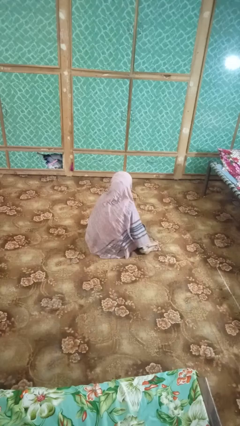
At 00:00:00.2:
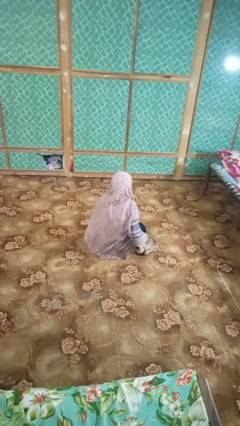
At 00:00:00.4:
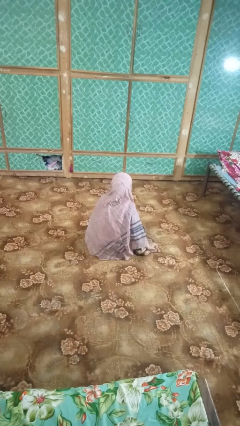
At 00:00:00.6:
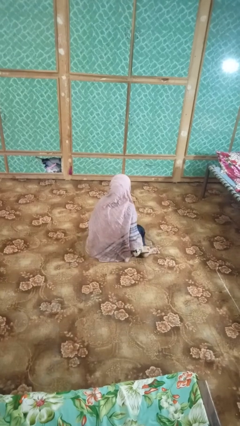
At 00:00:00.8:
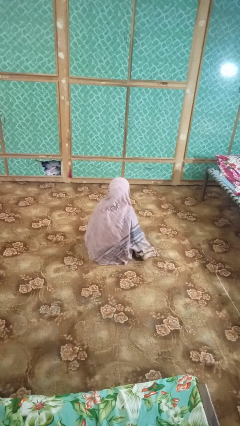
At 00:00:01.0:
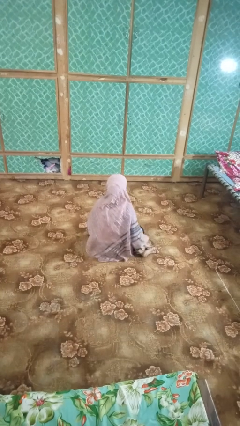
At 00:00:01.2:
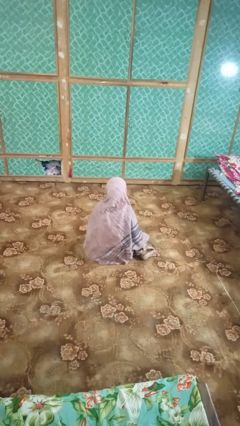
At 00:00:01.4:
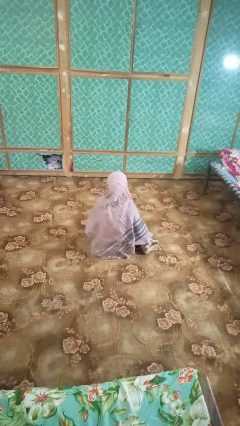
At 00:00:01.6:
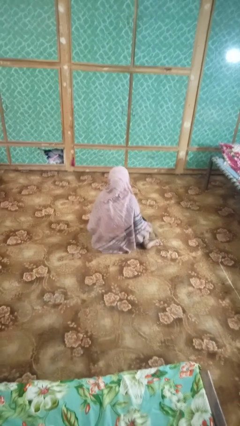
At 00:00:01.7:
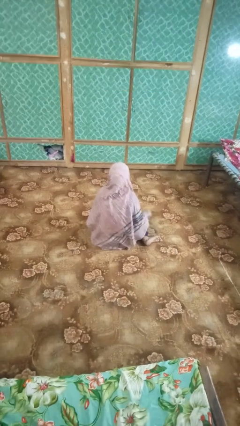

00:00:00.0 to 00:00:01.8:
person rubs foot

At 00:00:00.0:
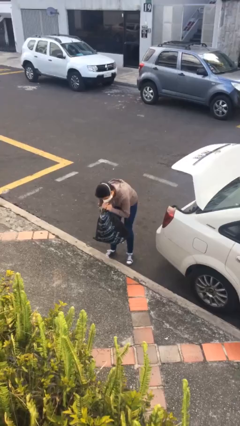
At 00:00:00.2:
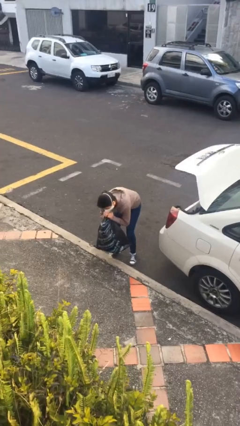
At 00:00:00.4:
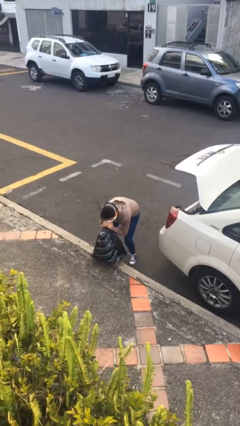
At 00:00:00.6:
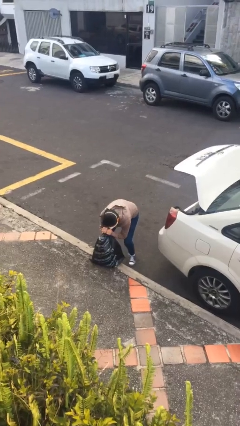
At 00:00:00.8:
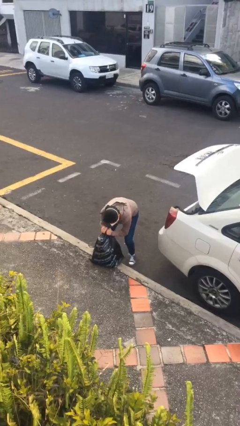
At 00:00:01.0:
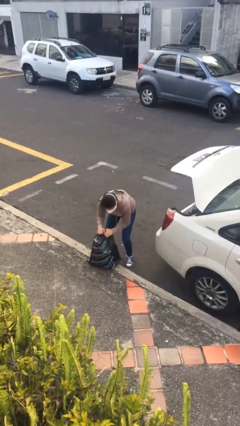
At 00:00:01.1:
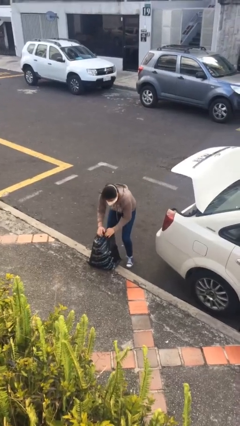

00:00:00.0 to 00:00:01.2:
person puts down object on floor

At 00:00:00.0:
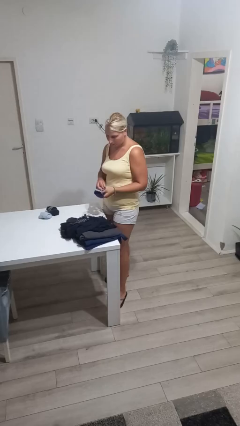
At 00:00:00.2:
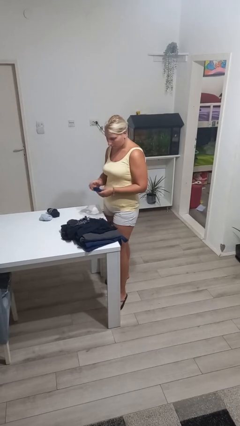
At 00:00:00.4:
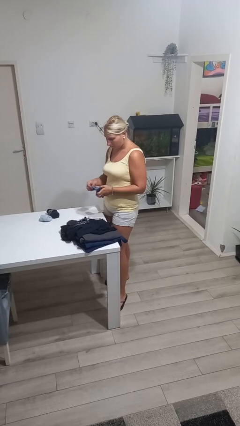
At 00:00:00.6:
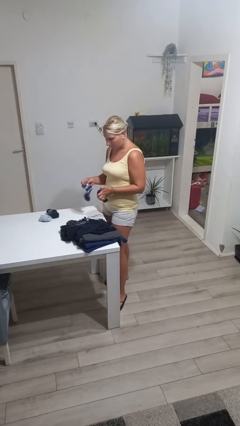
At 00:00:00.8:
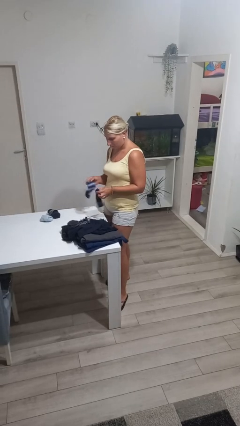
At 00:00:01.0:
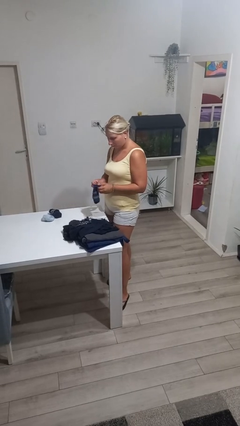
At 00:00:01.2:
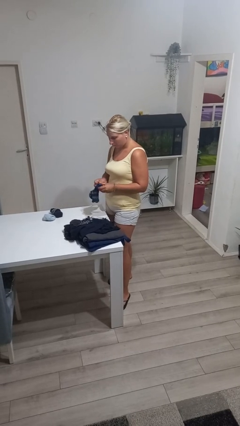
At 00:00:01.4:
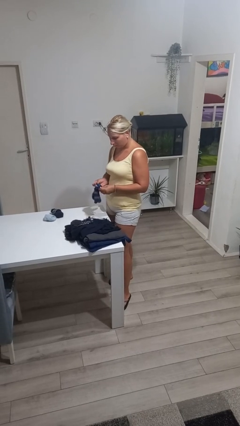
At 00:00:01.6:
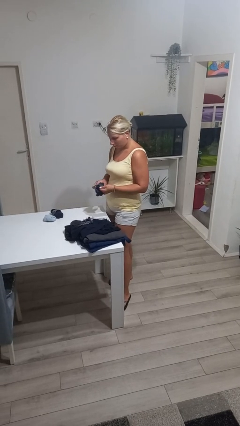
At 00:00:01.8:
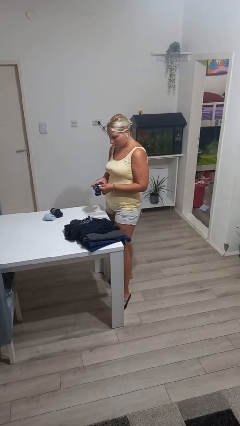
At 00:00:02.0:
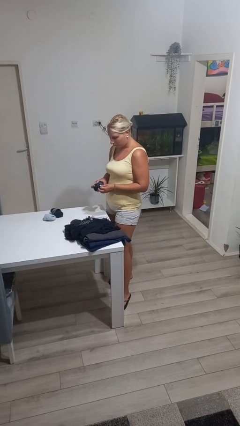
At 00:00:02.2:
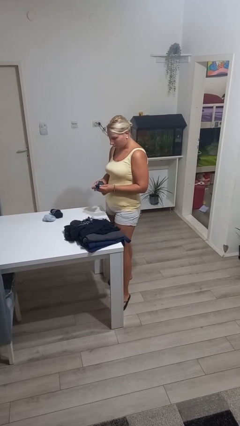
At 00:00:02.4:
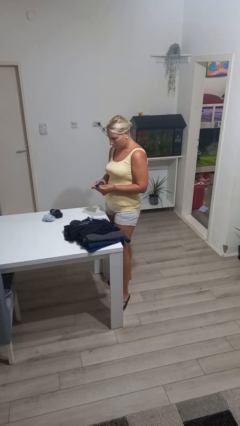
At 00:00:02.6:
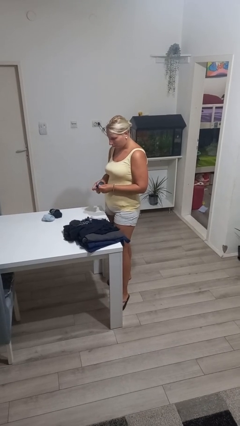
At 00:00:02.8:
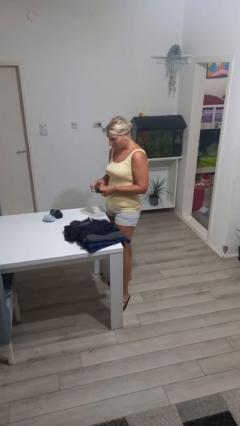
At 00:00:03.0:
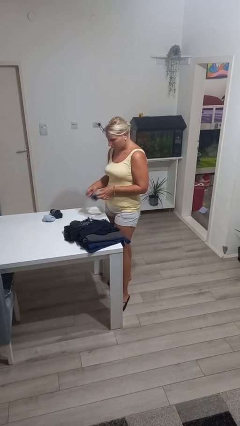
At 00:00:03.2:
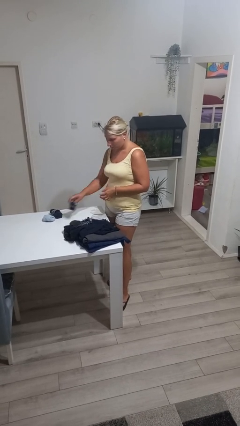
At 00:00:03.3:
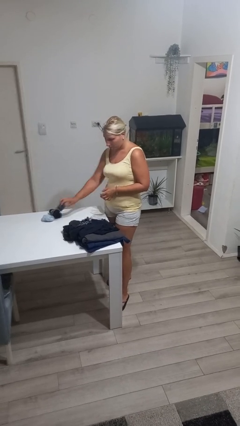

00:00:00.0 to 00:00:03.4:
person folds socks

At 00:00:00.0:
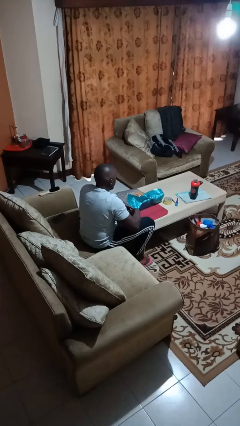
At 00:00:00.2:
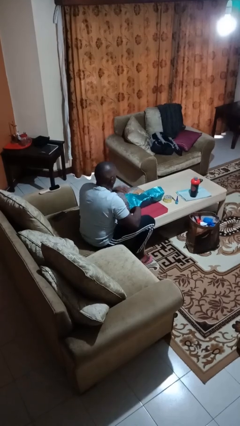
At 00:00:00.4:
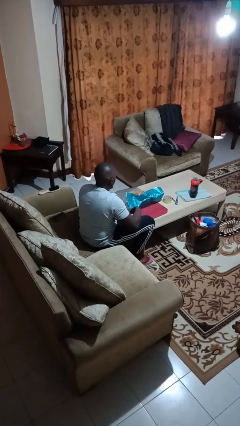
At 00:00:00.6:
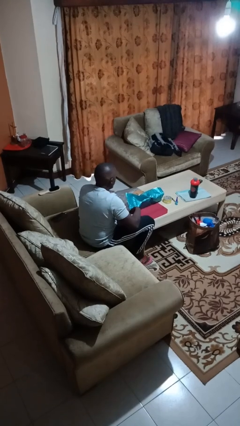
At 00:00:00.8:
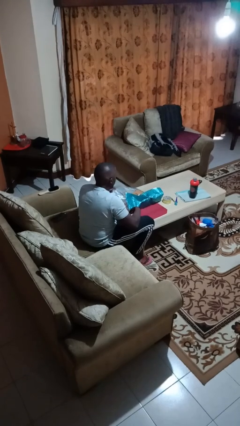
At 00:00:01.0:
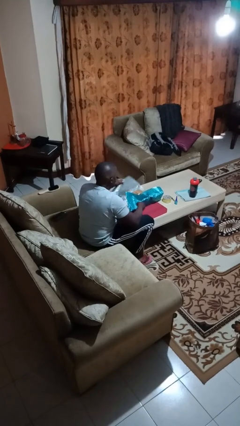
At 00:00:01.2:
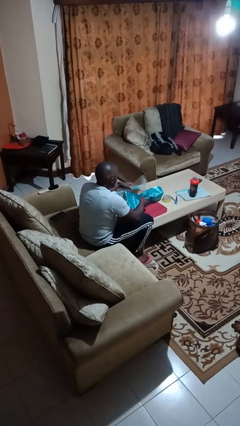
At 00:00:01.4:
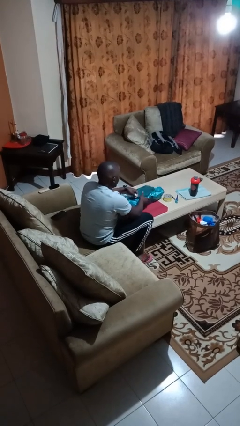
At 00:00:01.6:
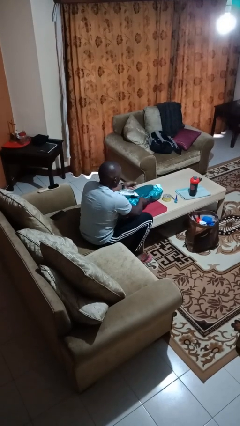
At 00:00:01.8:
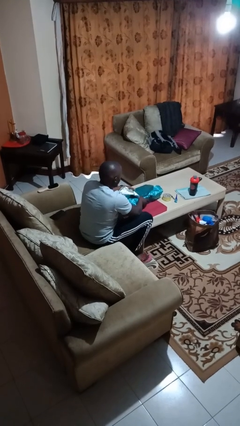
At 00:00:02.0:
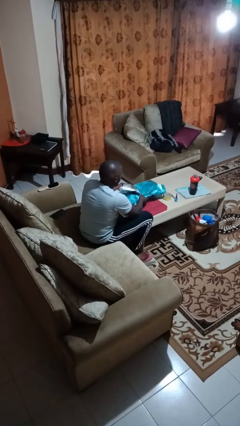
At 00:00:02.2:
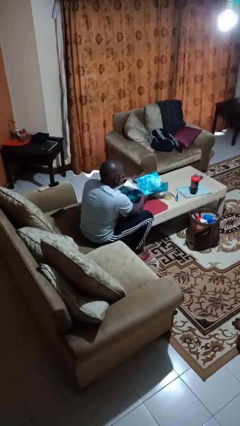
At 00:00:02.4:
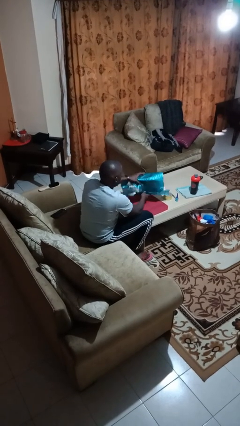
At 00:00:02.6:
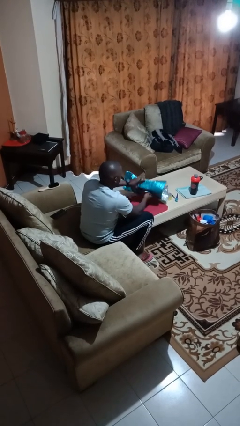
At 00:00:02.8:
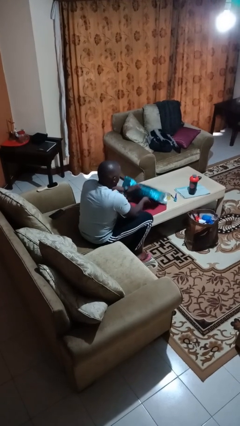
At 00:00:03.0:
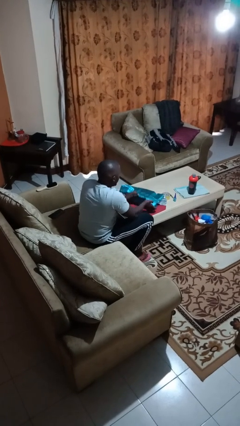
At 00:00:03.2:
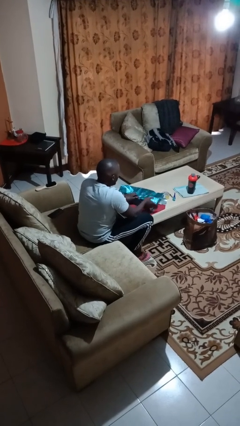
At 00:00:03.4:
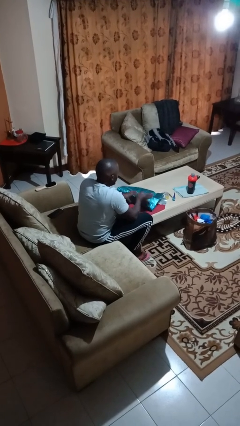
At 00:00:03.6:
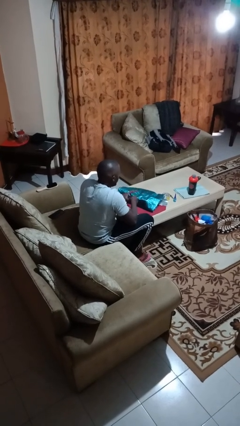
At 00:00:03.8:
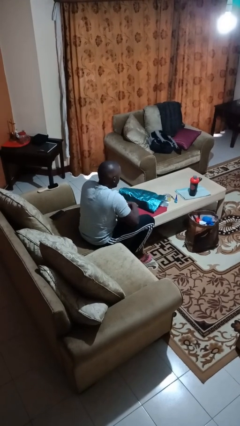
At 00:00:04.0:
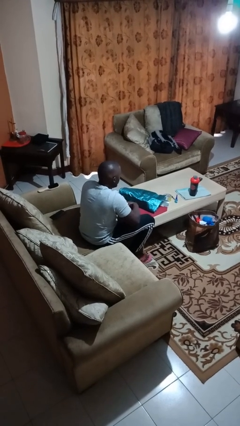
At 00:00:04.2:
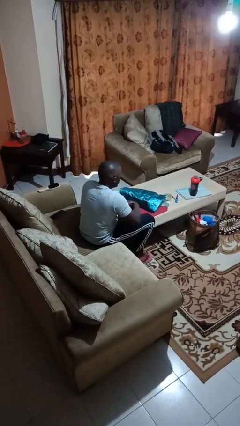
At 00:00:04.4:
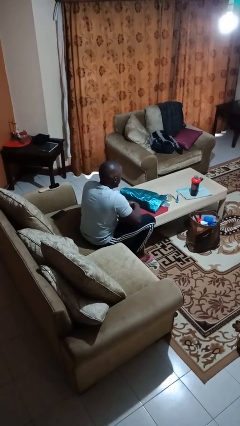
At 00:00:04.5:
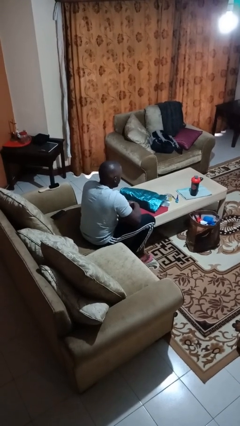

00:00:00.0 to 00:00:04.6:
person wraps box

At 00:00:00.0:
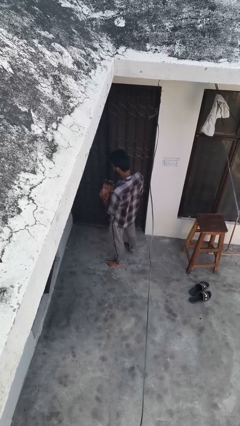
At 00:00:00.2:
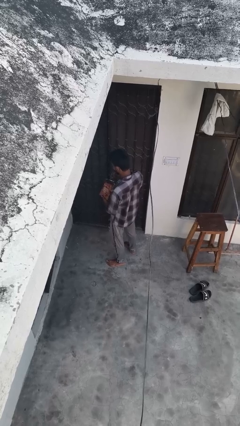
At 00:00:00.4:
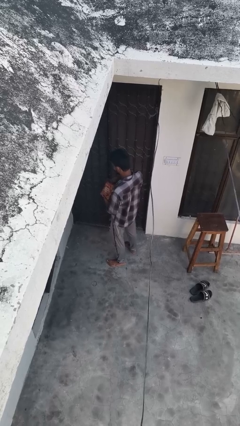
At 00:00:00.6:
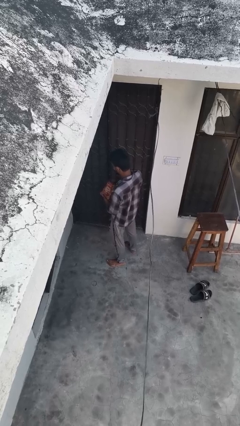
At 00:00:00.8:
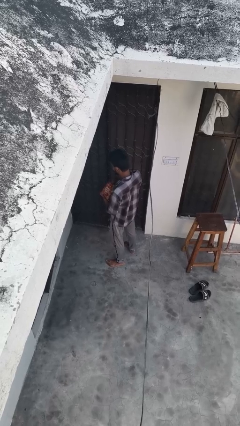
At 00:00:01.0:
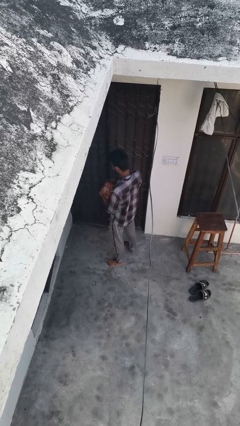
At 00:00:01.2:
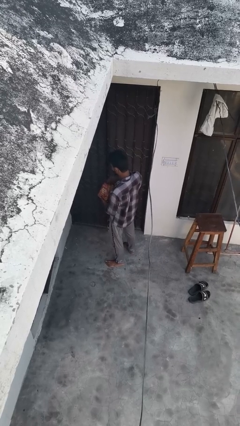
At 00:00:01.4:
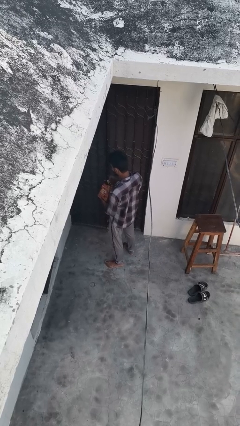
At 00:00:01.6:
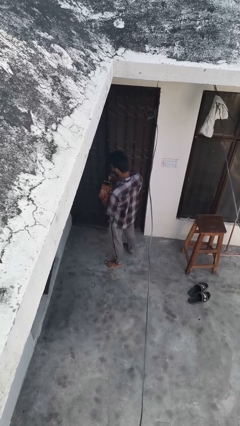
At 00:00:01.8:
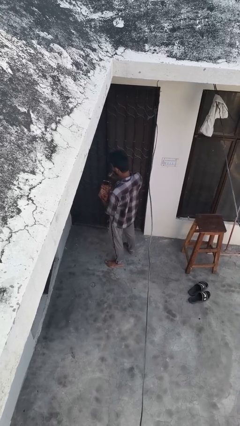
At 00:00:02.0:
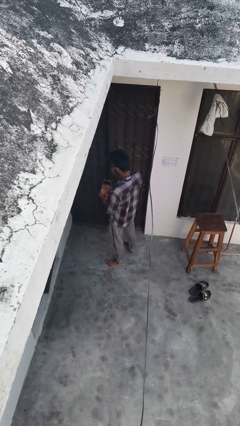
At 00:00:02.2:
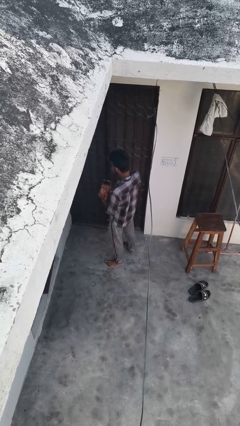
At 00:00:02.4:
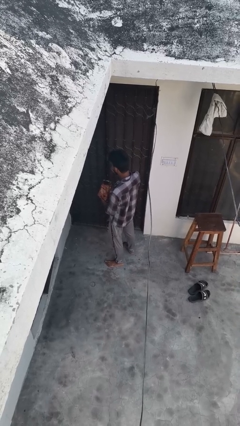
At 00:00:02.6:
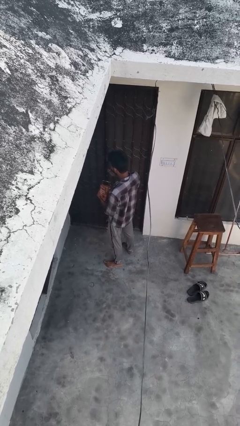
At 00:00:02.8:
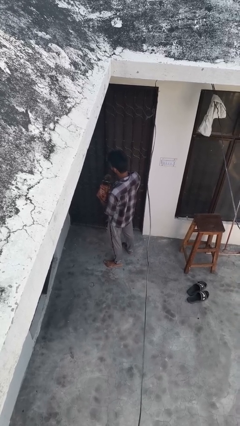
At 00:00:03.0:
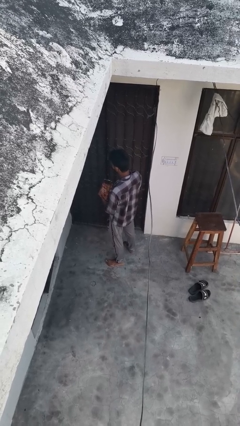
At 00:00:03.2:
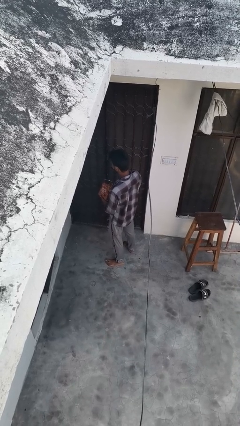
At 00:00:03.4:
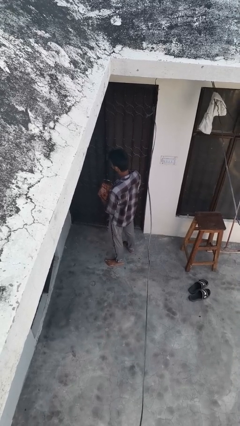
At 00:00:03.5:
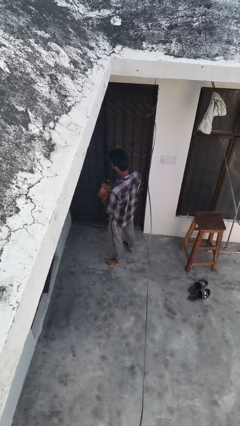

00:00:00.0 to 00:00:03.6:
person eats snack from bag

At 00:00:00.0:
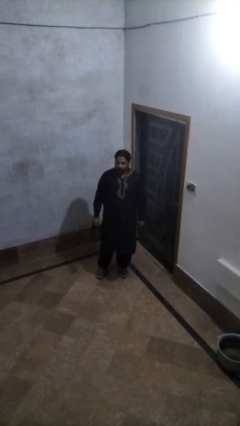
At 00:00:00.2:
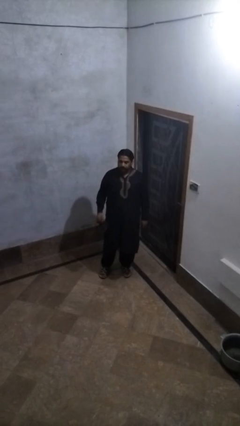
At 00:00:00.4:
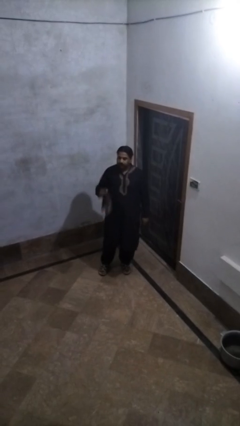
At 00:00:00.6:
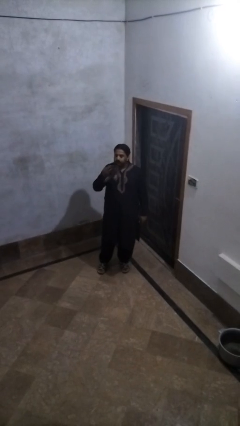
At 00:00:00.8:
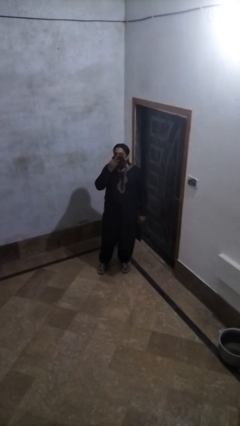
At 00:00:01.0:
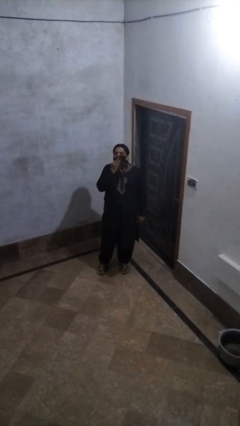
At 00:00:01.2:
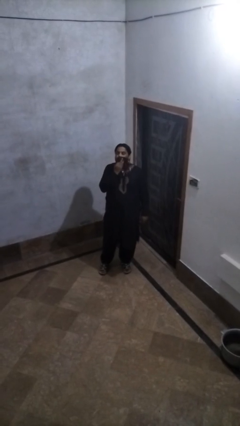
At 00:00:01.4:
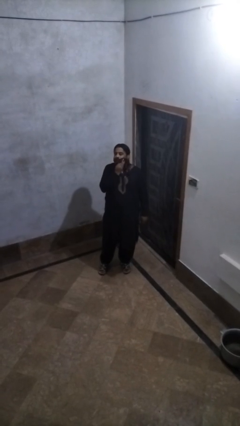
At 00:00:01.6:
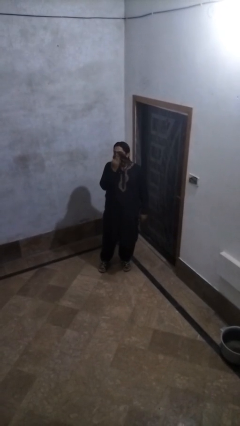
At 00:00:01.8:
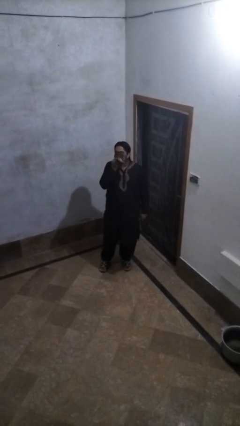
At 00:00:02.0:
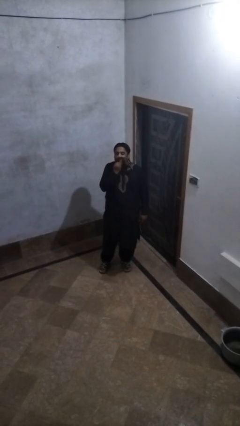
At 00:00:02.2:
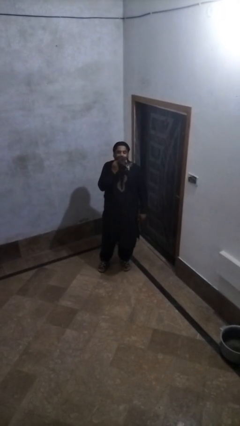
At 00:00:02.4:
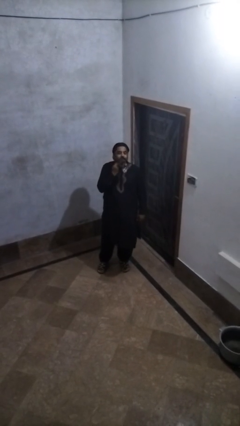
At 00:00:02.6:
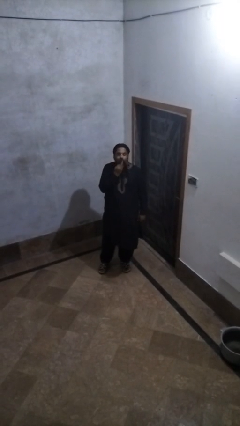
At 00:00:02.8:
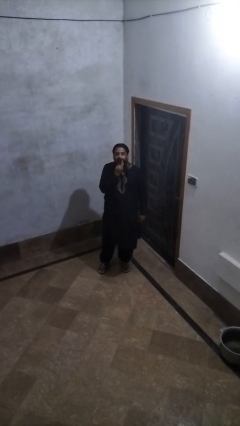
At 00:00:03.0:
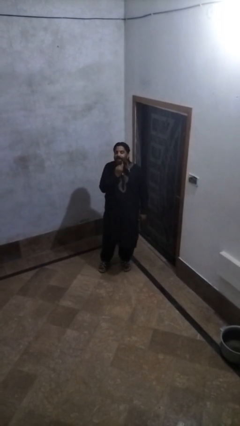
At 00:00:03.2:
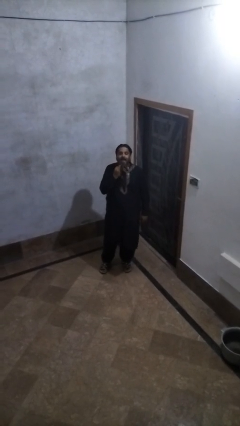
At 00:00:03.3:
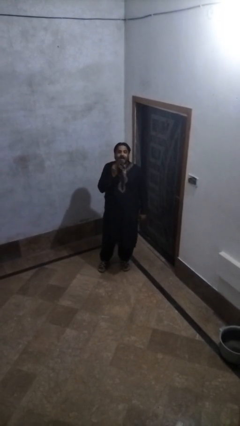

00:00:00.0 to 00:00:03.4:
person wipes mouth with napkin
